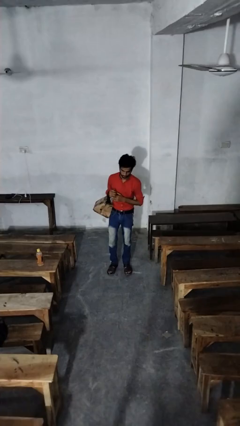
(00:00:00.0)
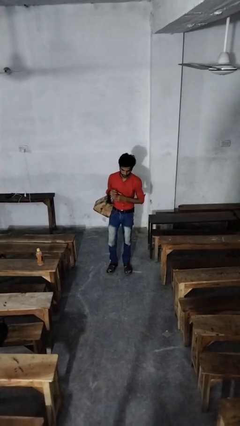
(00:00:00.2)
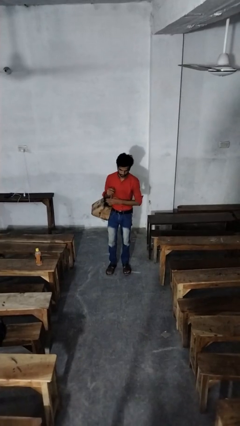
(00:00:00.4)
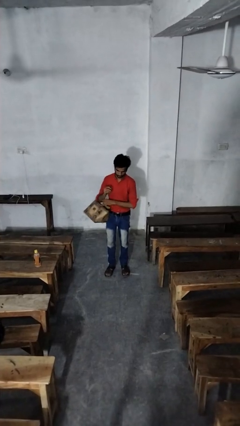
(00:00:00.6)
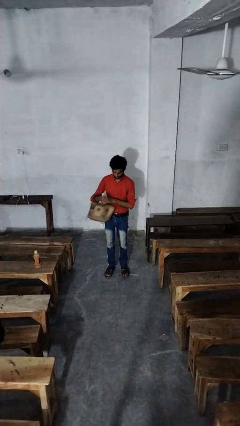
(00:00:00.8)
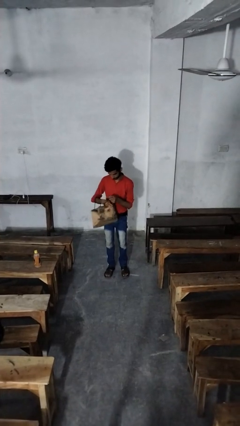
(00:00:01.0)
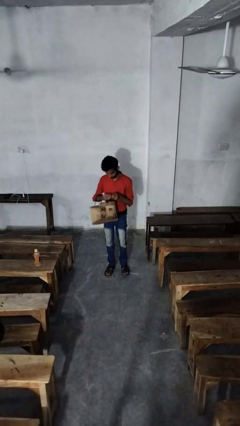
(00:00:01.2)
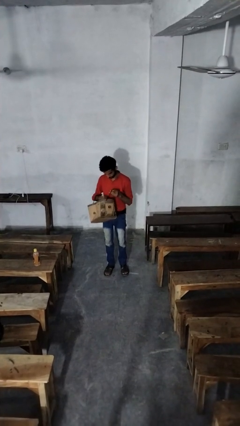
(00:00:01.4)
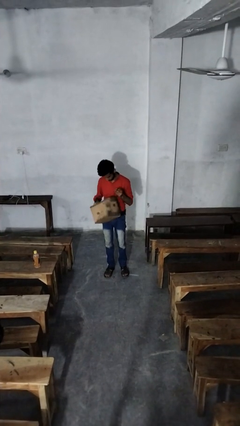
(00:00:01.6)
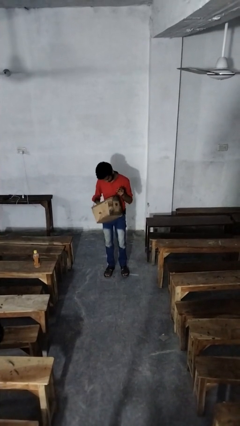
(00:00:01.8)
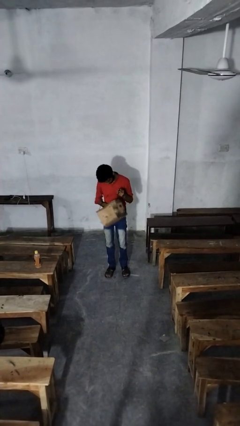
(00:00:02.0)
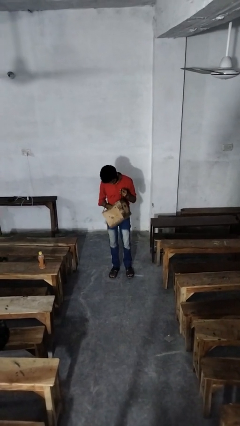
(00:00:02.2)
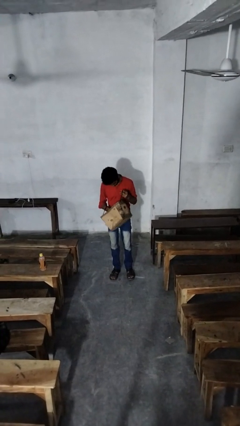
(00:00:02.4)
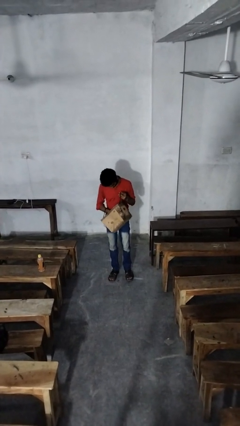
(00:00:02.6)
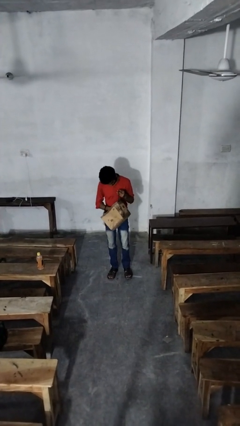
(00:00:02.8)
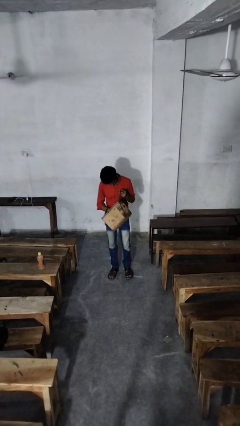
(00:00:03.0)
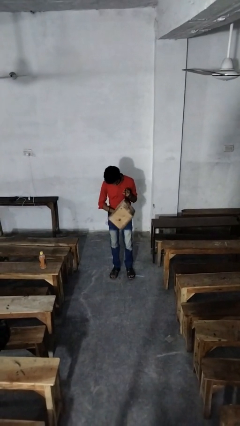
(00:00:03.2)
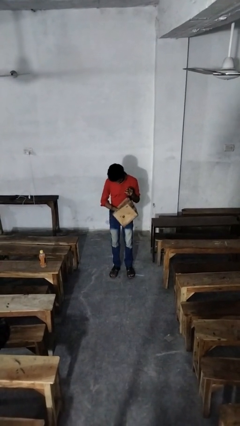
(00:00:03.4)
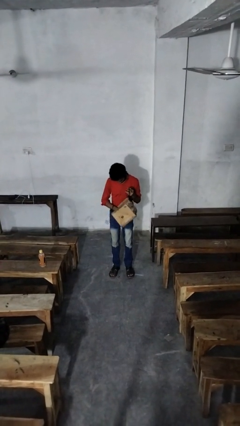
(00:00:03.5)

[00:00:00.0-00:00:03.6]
person searches in purse

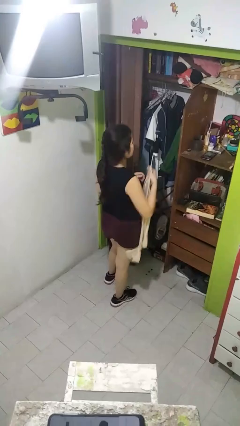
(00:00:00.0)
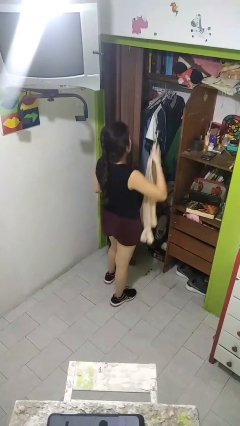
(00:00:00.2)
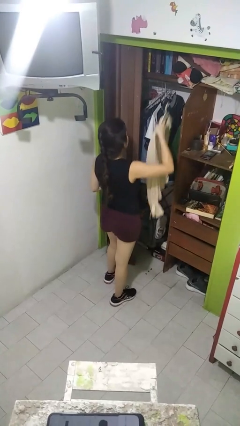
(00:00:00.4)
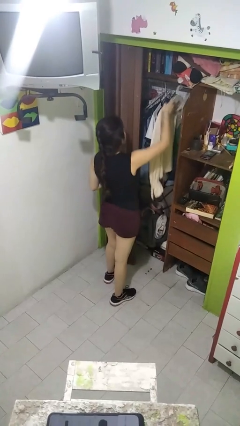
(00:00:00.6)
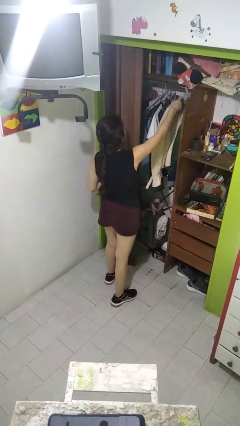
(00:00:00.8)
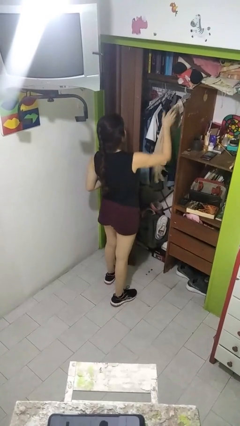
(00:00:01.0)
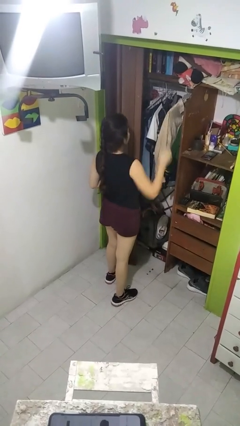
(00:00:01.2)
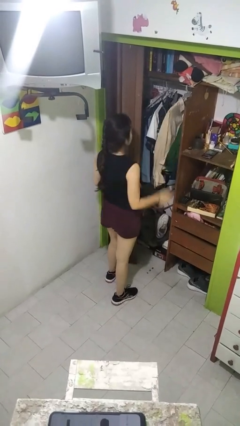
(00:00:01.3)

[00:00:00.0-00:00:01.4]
person puts clothes into closet

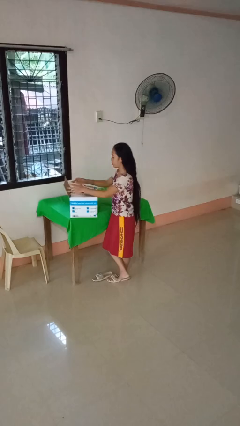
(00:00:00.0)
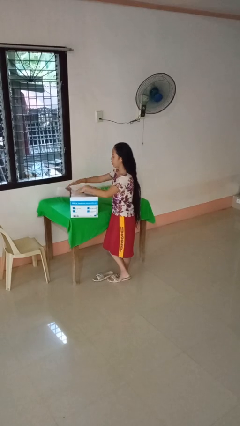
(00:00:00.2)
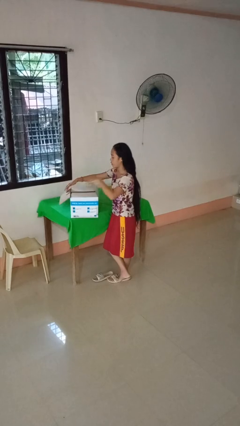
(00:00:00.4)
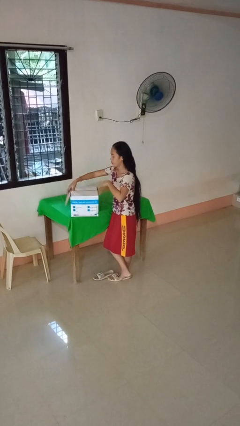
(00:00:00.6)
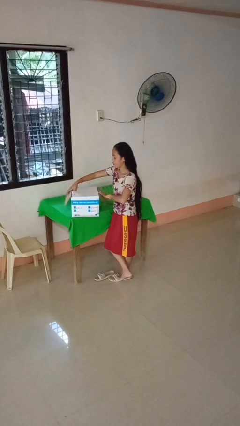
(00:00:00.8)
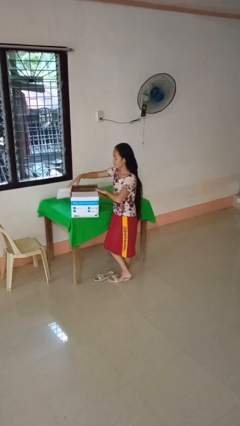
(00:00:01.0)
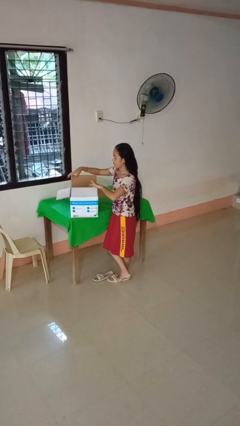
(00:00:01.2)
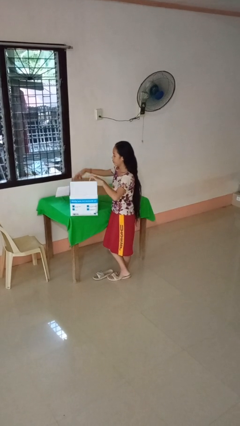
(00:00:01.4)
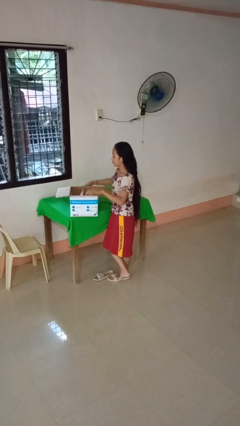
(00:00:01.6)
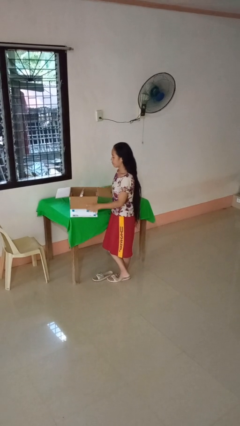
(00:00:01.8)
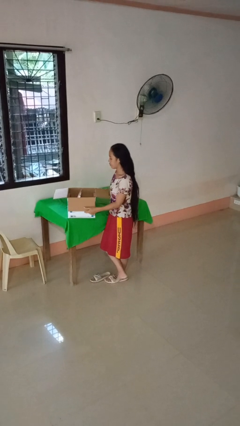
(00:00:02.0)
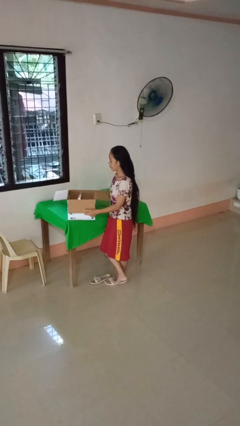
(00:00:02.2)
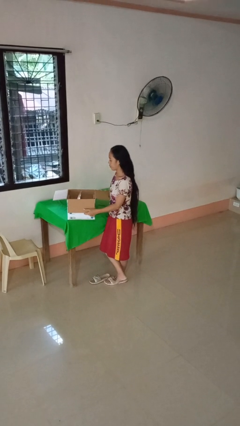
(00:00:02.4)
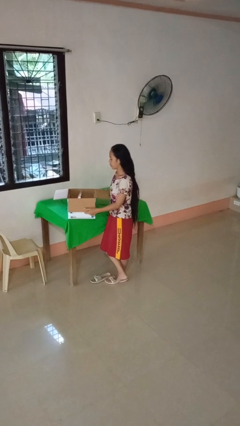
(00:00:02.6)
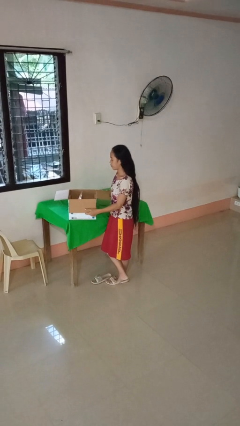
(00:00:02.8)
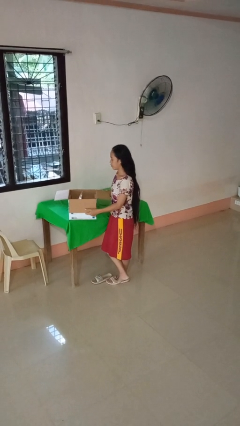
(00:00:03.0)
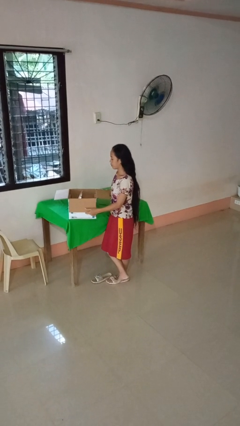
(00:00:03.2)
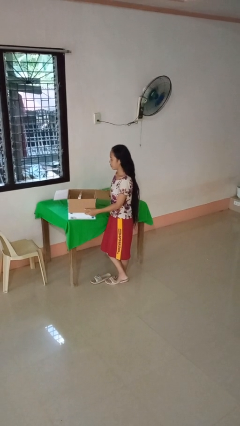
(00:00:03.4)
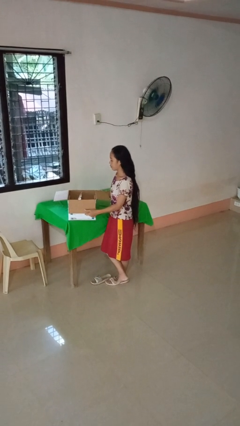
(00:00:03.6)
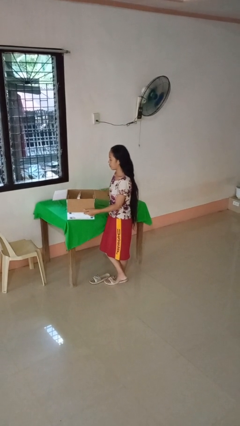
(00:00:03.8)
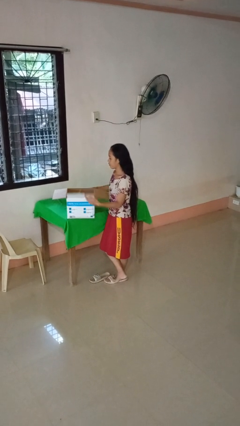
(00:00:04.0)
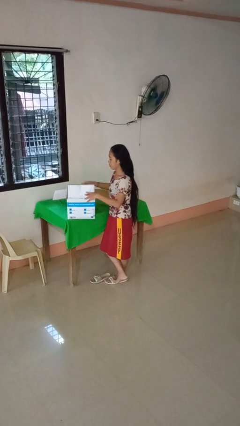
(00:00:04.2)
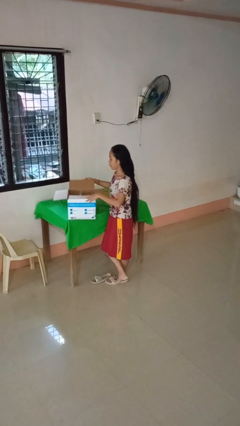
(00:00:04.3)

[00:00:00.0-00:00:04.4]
person opens box

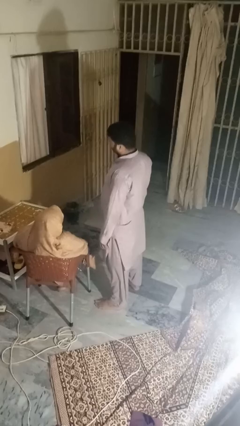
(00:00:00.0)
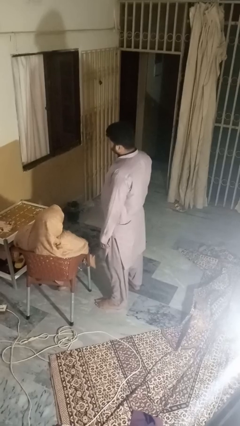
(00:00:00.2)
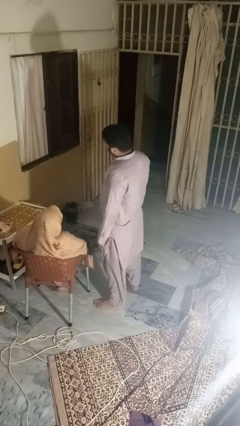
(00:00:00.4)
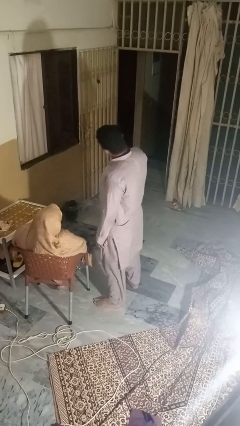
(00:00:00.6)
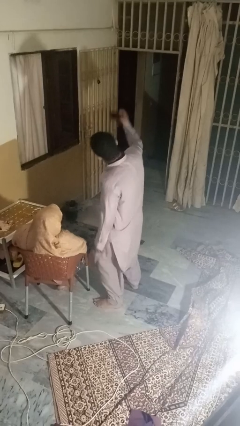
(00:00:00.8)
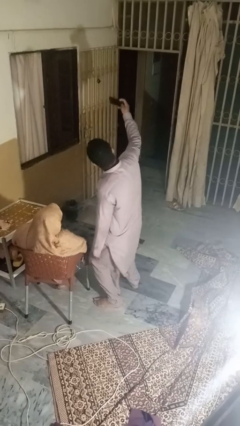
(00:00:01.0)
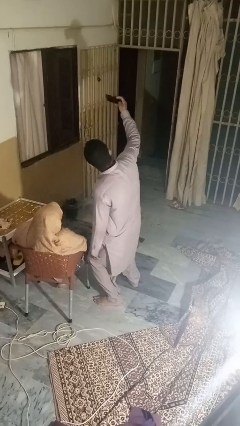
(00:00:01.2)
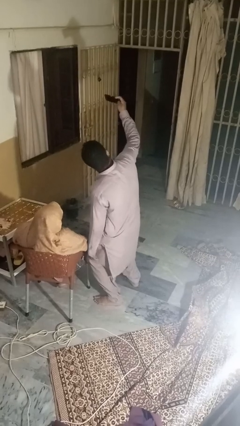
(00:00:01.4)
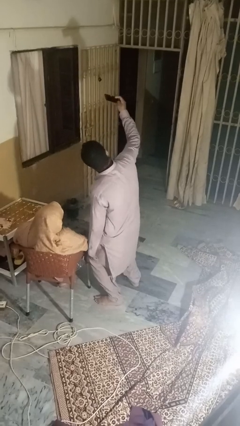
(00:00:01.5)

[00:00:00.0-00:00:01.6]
person takes selfie with person

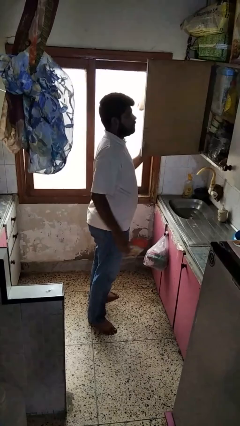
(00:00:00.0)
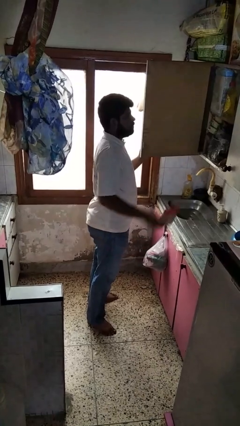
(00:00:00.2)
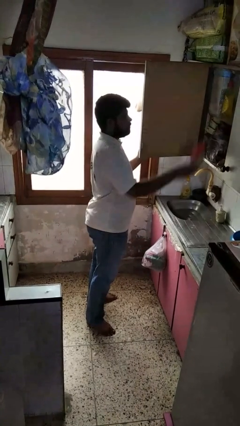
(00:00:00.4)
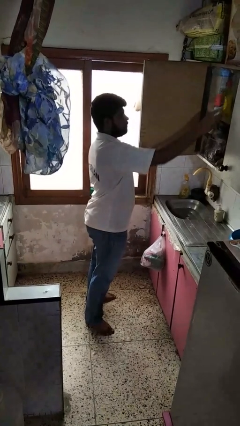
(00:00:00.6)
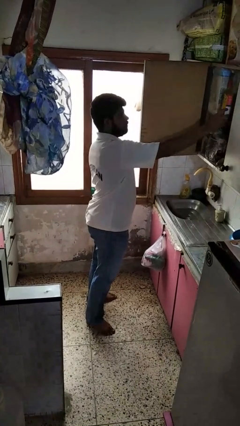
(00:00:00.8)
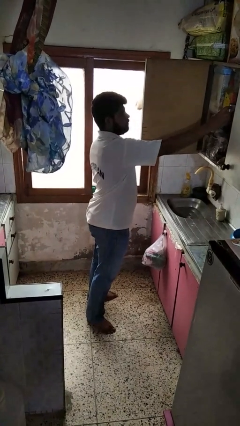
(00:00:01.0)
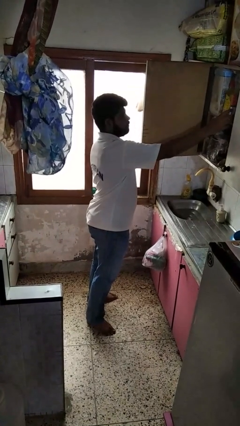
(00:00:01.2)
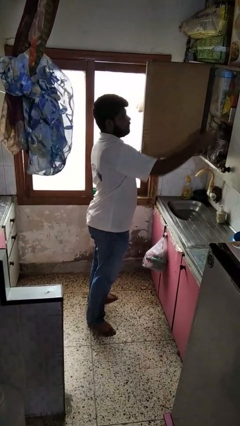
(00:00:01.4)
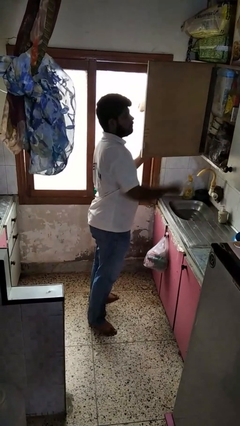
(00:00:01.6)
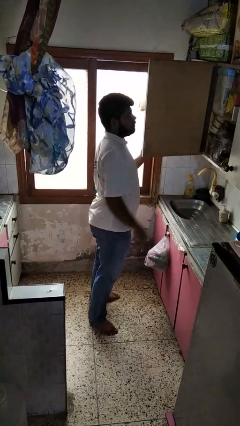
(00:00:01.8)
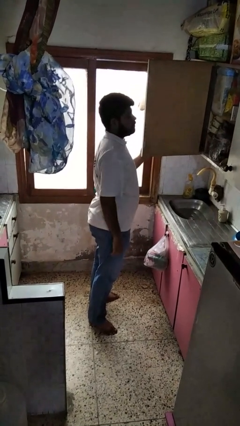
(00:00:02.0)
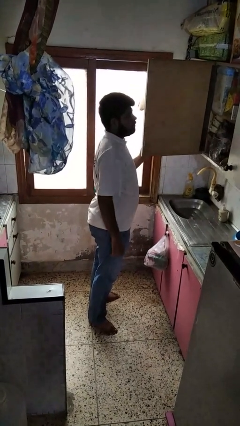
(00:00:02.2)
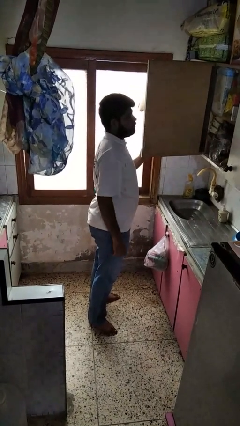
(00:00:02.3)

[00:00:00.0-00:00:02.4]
person puts down object into cabinet

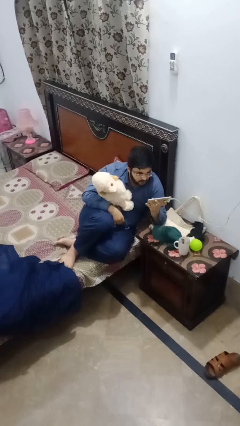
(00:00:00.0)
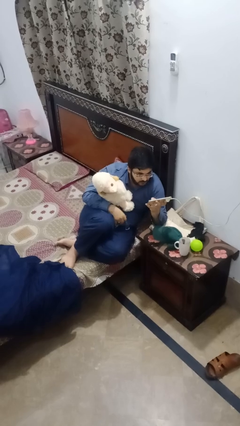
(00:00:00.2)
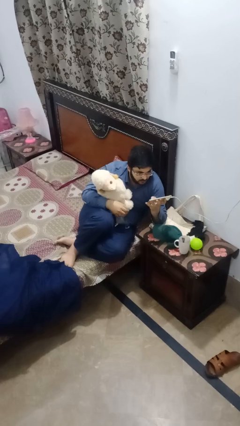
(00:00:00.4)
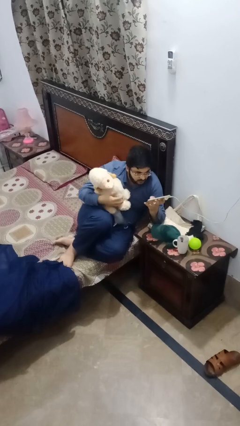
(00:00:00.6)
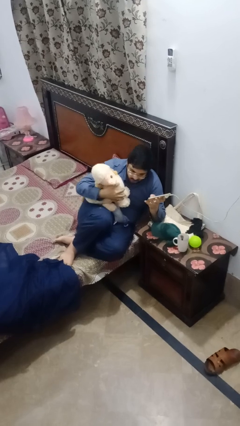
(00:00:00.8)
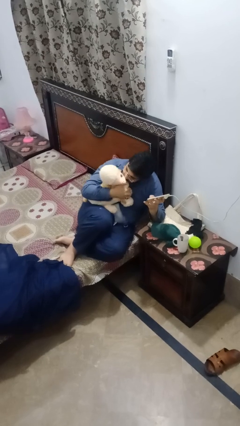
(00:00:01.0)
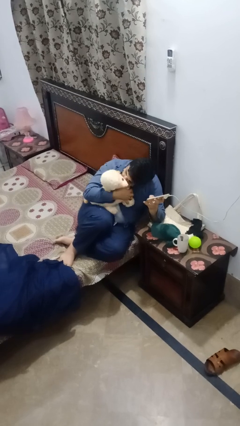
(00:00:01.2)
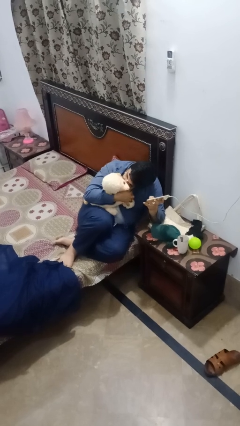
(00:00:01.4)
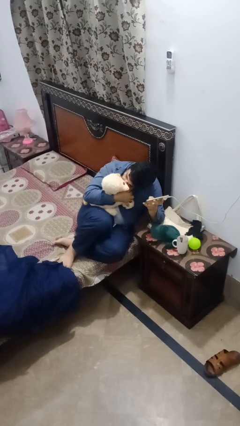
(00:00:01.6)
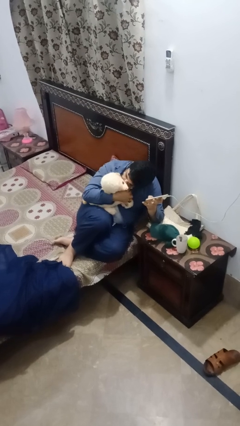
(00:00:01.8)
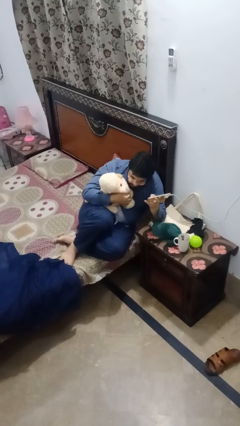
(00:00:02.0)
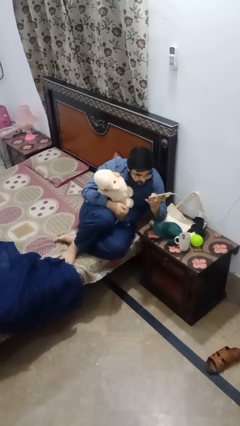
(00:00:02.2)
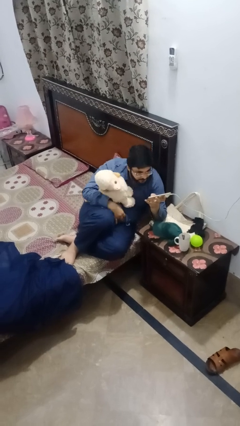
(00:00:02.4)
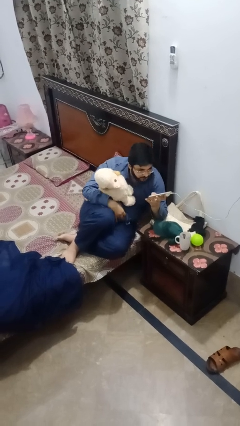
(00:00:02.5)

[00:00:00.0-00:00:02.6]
person hugs stuffed animal

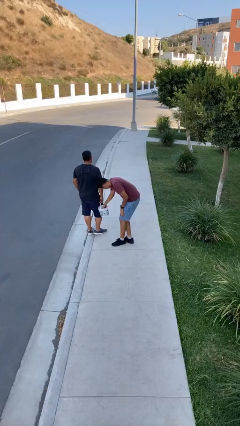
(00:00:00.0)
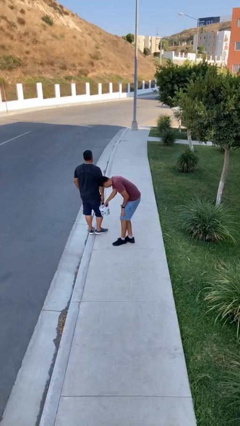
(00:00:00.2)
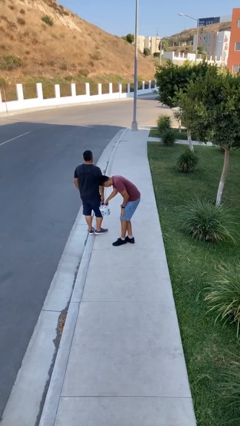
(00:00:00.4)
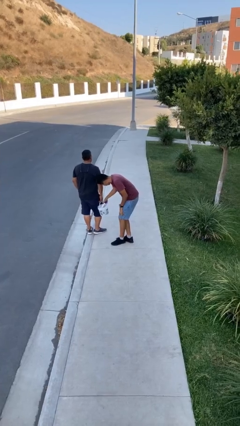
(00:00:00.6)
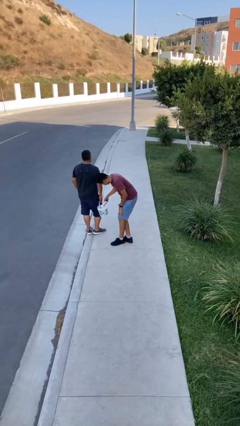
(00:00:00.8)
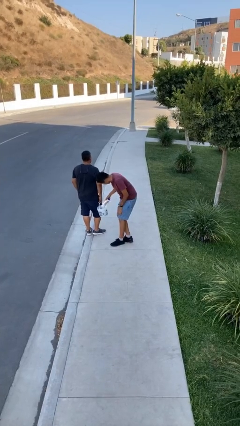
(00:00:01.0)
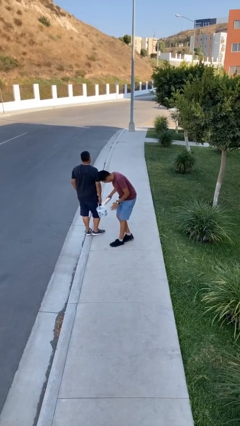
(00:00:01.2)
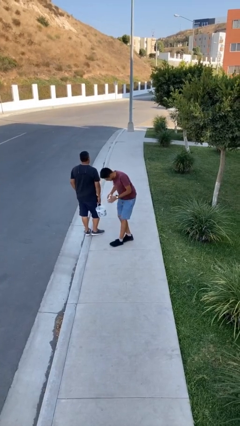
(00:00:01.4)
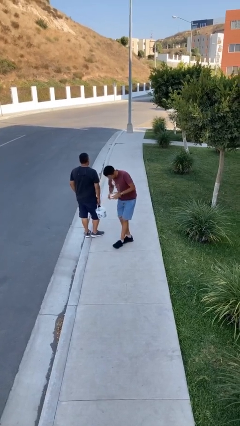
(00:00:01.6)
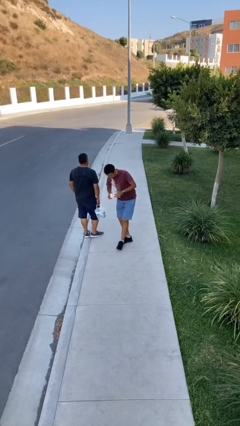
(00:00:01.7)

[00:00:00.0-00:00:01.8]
person steals object from person
